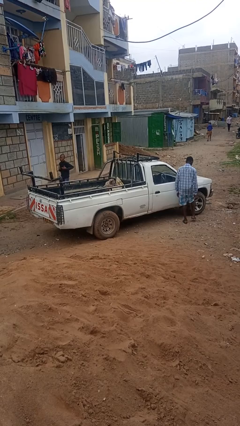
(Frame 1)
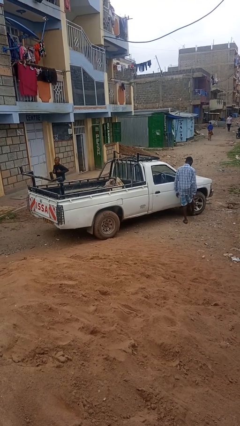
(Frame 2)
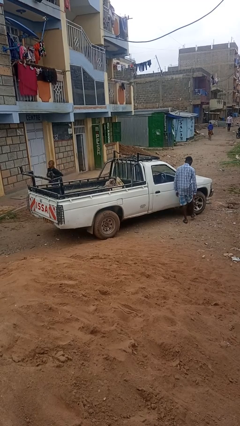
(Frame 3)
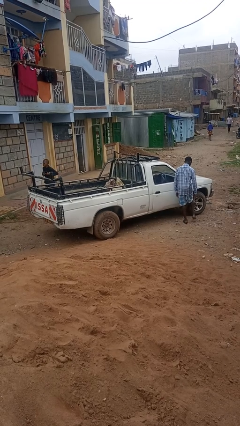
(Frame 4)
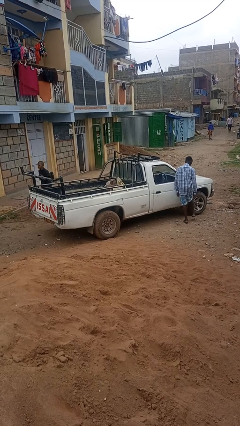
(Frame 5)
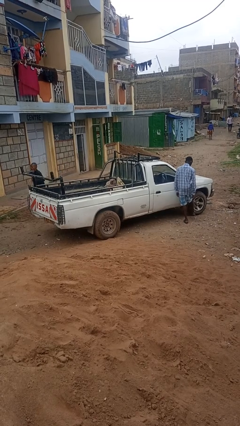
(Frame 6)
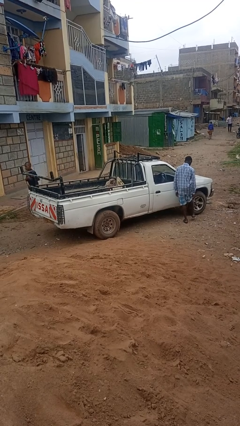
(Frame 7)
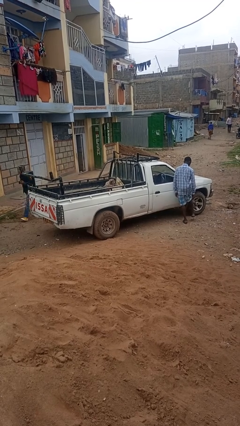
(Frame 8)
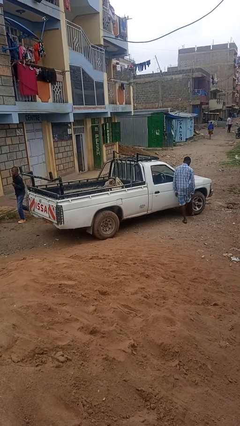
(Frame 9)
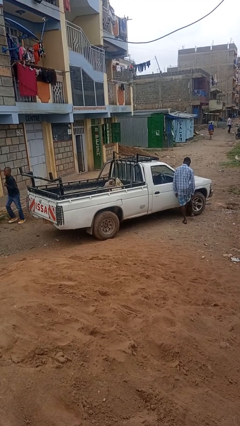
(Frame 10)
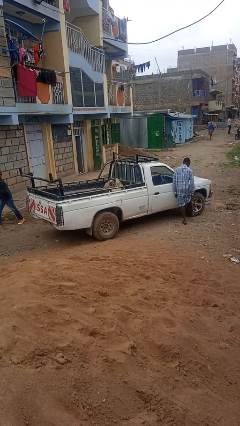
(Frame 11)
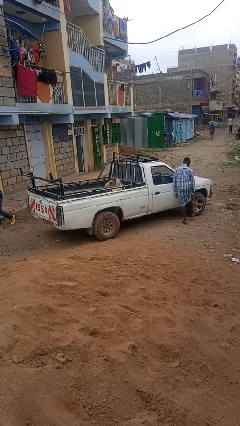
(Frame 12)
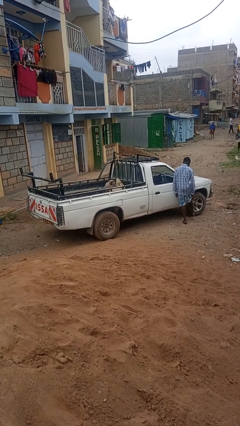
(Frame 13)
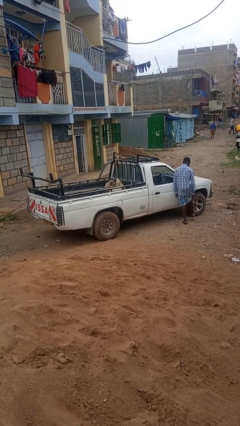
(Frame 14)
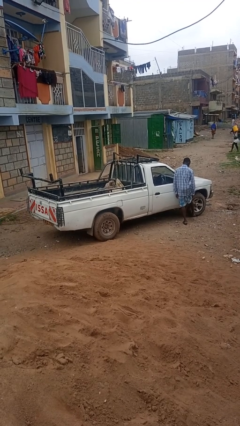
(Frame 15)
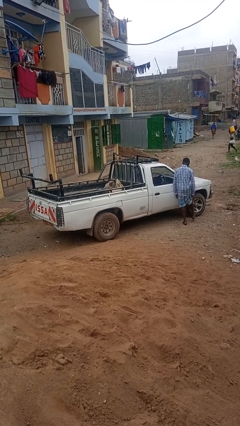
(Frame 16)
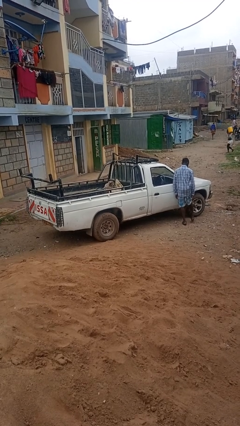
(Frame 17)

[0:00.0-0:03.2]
person kicks car tires

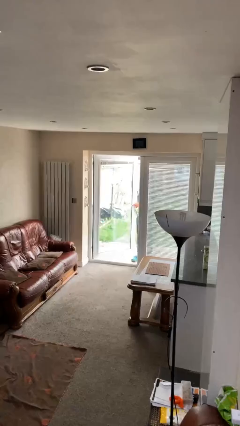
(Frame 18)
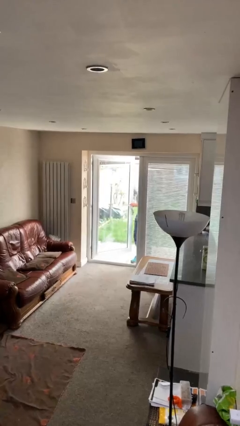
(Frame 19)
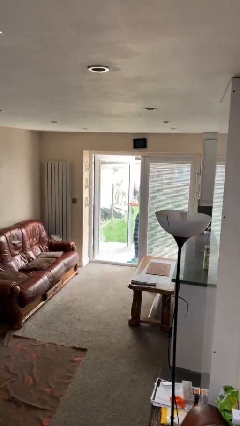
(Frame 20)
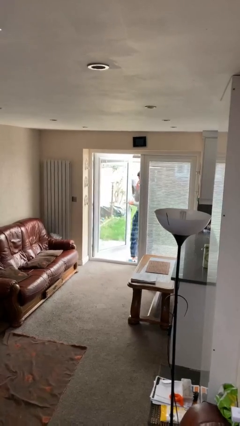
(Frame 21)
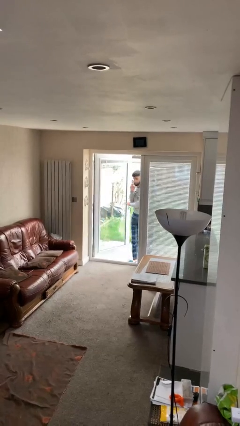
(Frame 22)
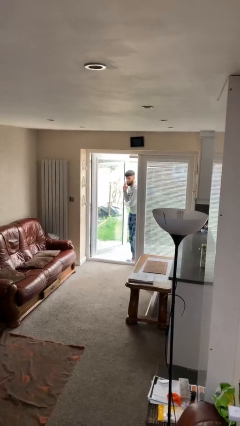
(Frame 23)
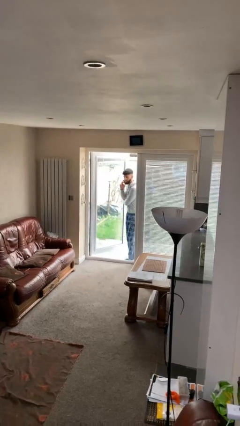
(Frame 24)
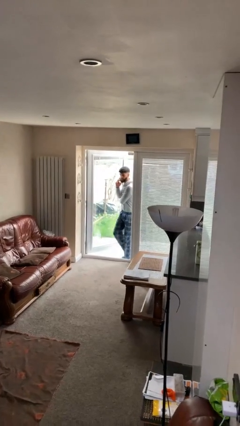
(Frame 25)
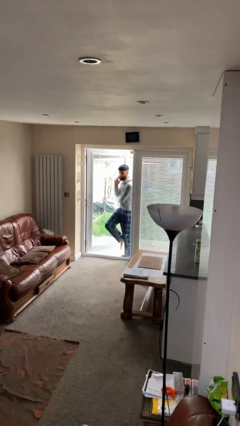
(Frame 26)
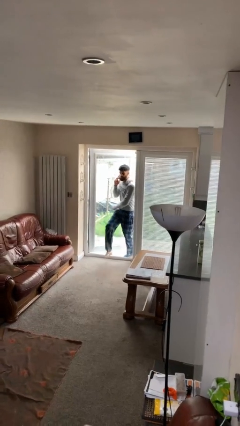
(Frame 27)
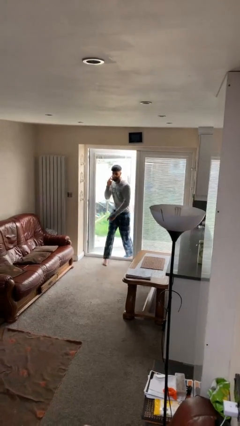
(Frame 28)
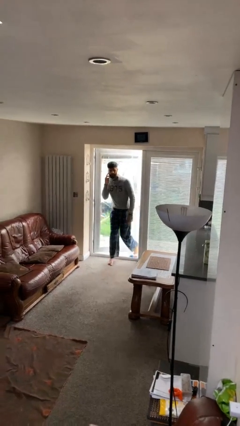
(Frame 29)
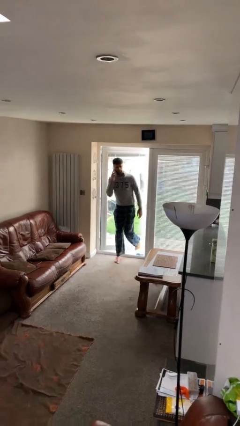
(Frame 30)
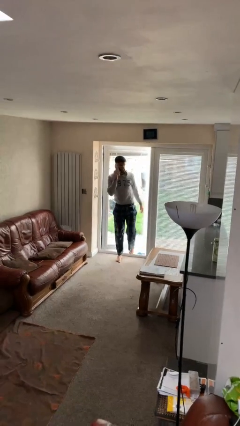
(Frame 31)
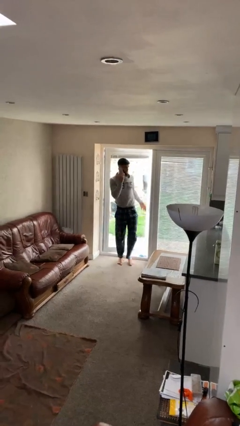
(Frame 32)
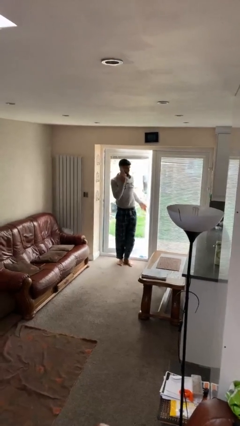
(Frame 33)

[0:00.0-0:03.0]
person enters scene through structure

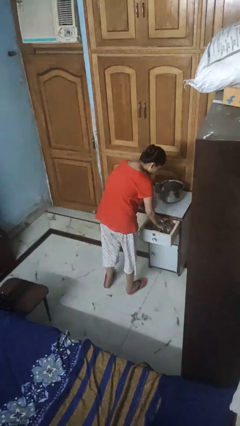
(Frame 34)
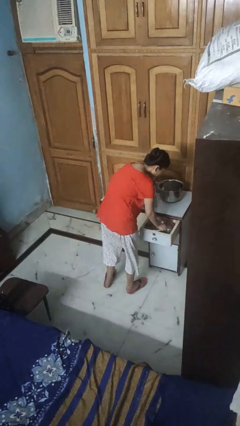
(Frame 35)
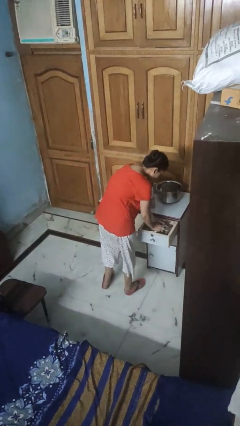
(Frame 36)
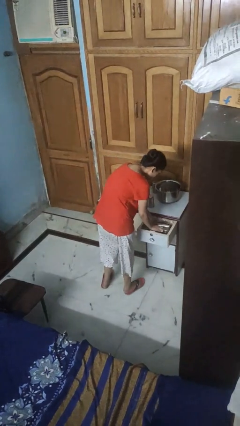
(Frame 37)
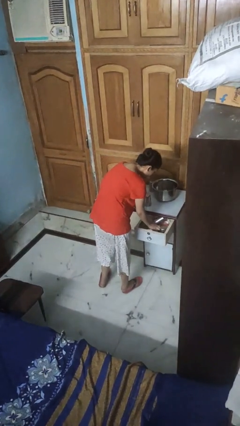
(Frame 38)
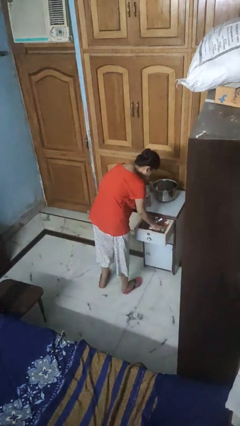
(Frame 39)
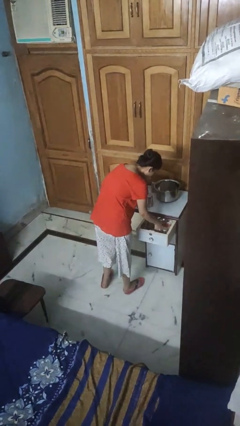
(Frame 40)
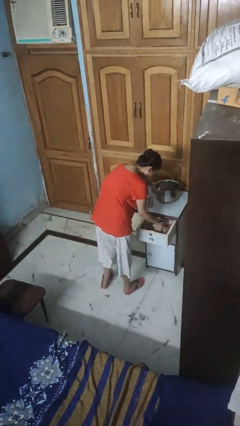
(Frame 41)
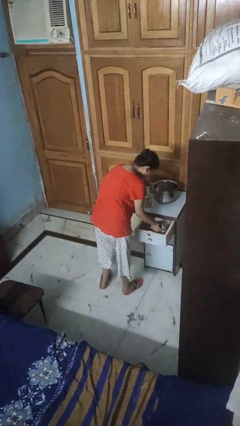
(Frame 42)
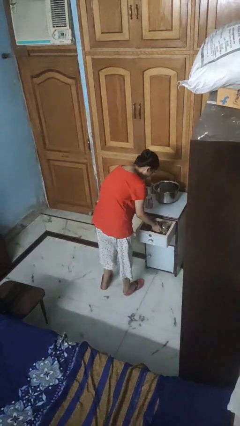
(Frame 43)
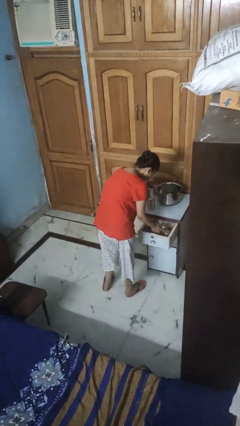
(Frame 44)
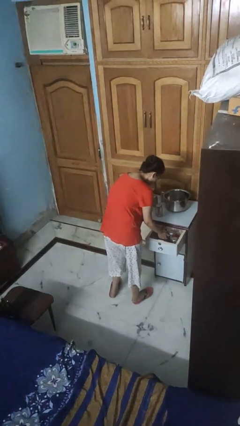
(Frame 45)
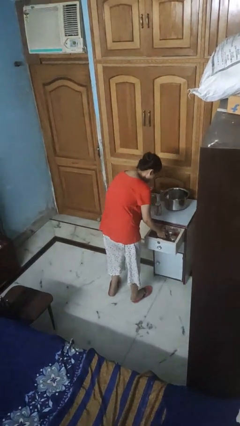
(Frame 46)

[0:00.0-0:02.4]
person searches in kitchen drawer

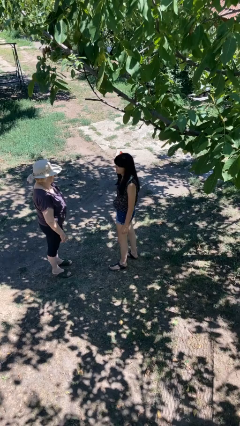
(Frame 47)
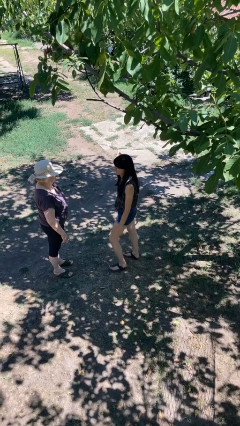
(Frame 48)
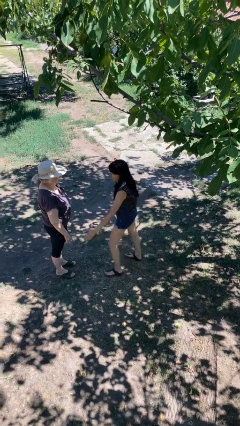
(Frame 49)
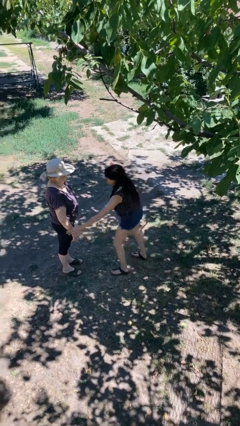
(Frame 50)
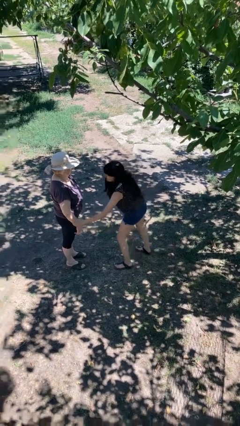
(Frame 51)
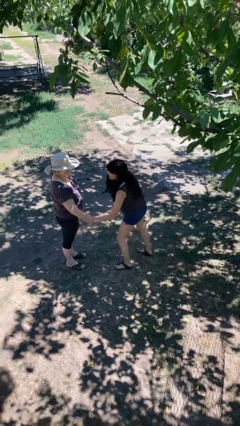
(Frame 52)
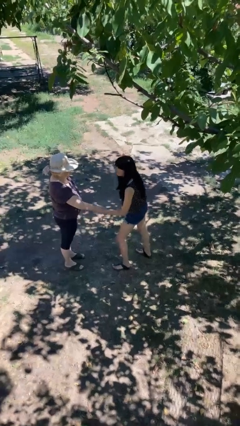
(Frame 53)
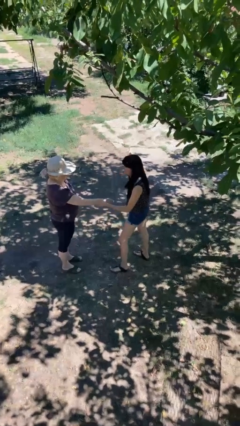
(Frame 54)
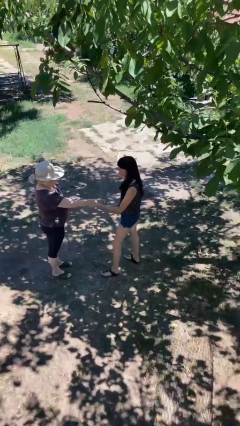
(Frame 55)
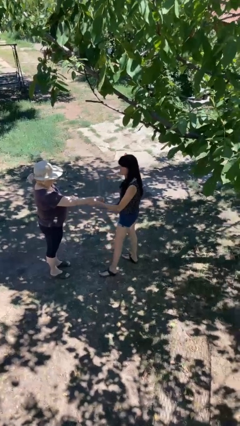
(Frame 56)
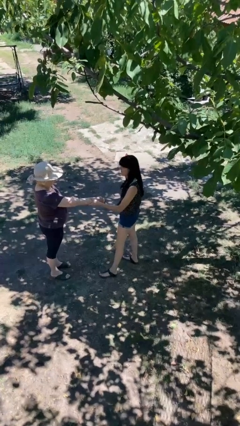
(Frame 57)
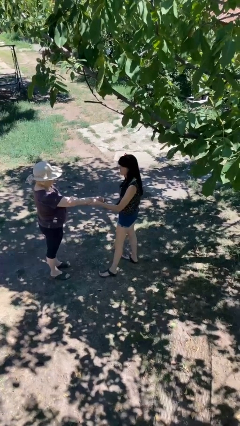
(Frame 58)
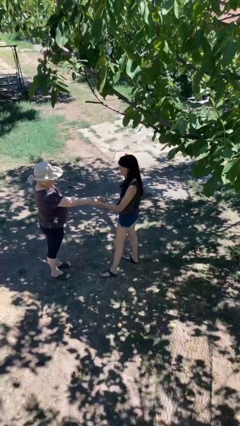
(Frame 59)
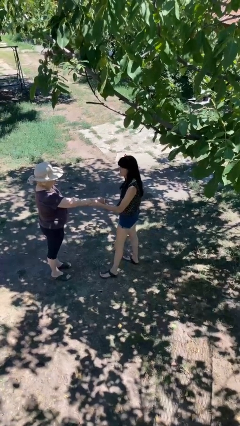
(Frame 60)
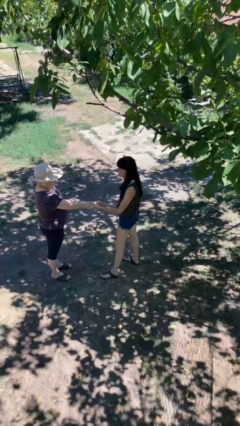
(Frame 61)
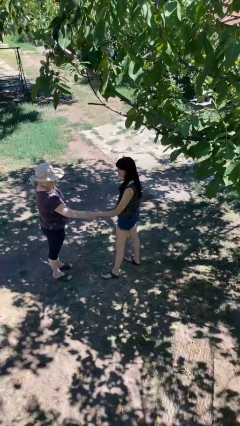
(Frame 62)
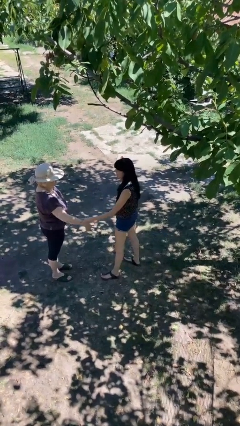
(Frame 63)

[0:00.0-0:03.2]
person grabs person by forearm

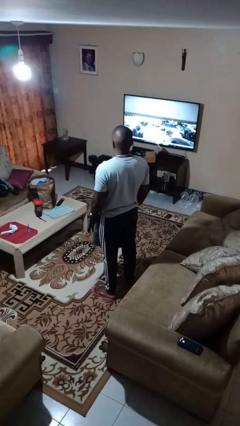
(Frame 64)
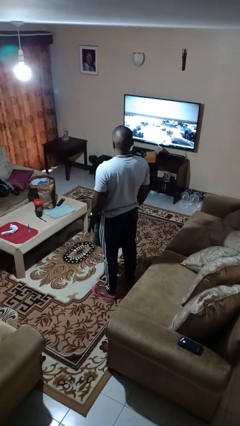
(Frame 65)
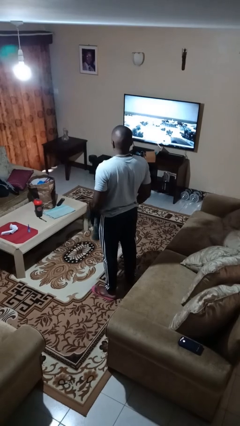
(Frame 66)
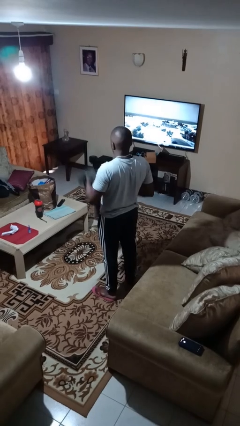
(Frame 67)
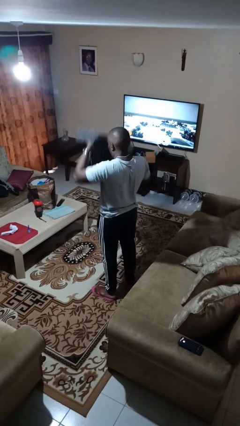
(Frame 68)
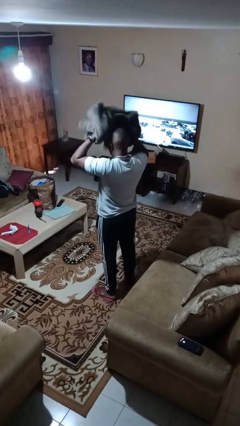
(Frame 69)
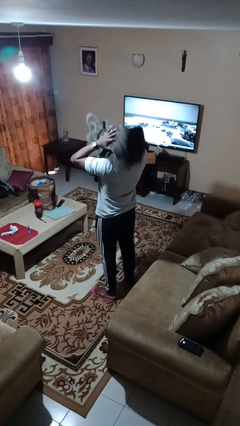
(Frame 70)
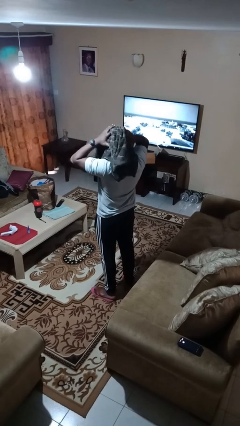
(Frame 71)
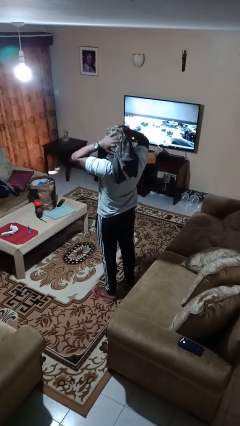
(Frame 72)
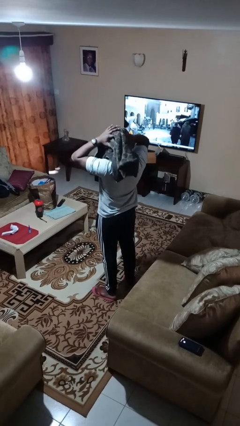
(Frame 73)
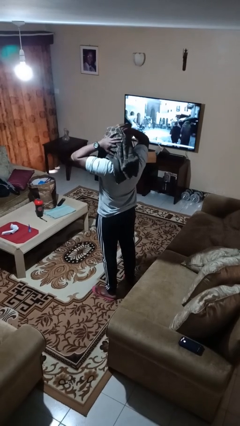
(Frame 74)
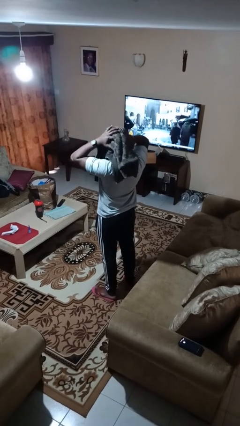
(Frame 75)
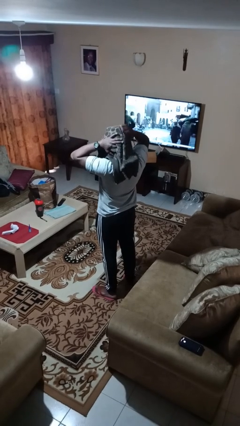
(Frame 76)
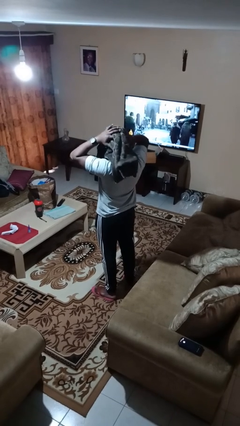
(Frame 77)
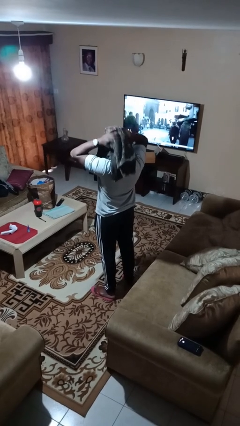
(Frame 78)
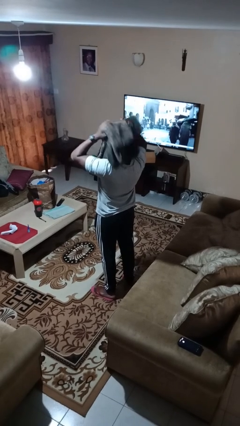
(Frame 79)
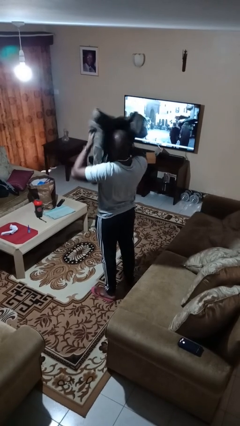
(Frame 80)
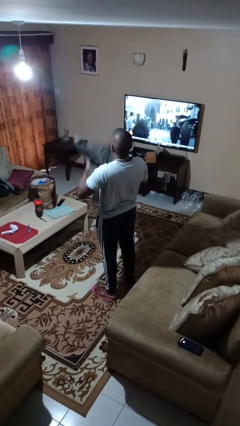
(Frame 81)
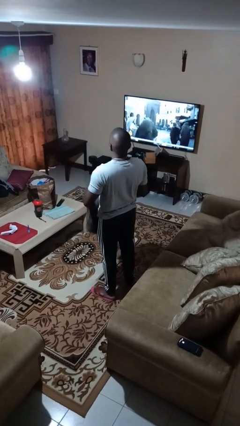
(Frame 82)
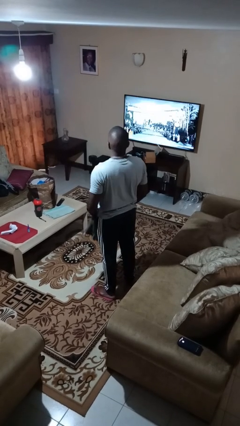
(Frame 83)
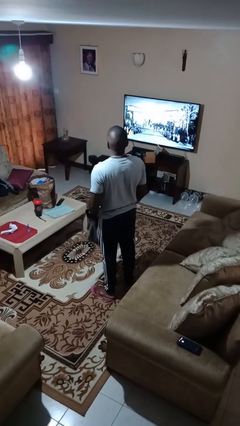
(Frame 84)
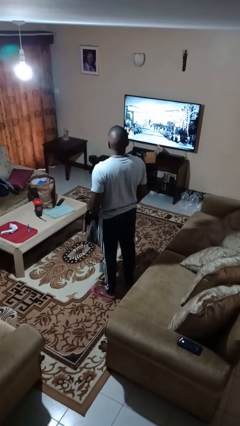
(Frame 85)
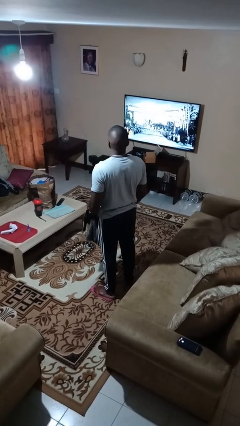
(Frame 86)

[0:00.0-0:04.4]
person dries hair with towel

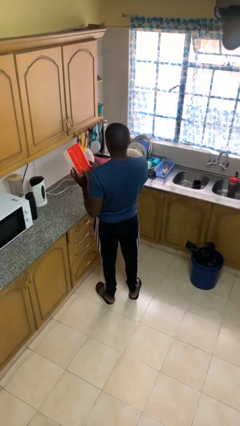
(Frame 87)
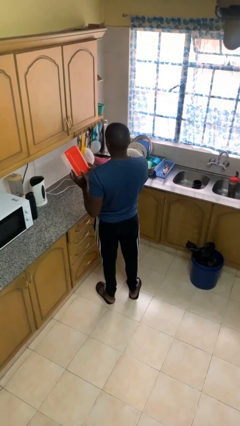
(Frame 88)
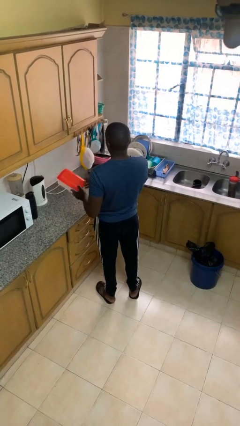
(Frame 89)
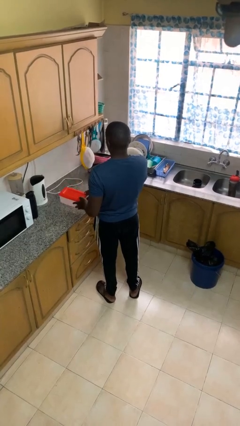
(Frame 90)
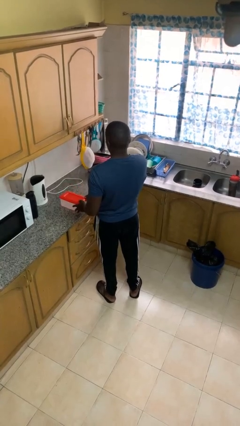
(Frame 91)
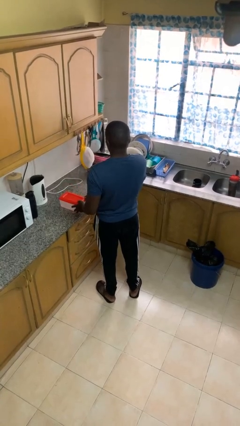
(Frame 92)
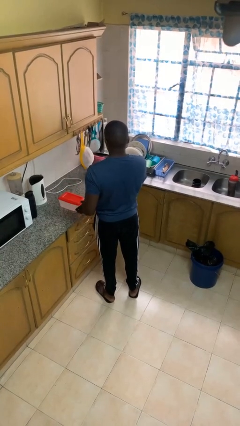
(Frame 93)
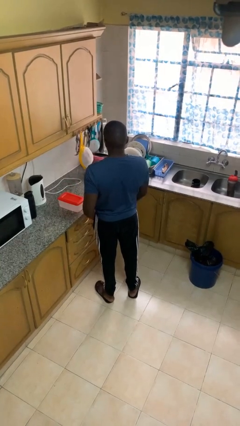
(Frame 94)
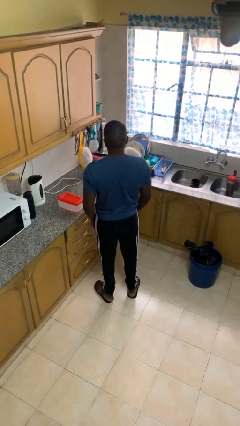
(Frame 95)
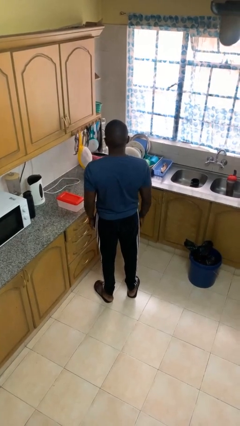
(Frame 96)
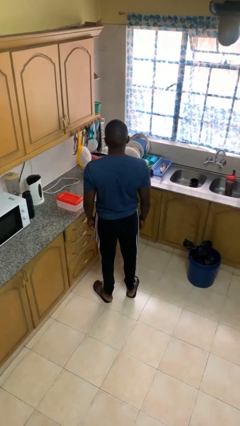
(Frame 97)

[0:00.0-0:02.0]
person puts down object on countertop
